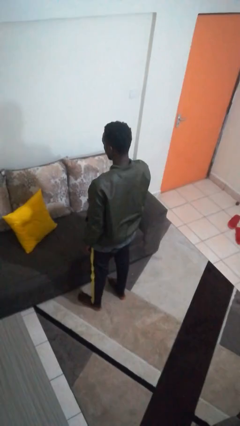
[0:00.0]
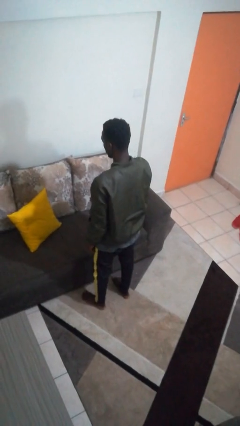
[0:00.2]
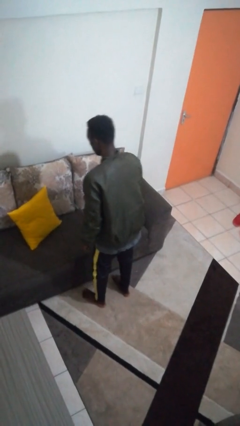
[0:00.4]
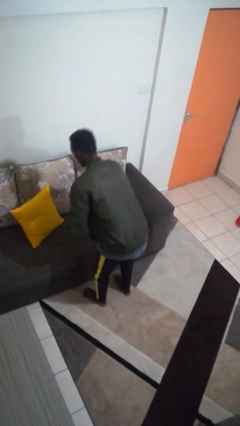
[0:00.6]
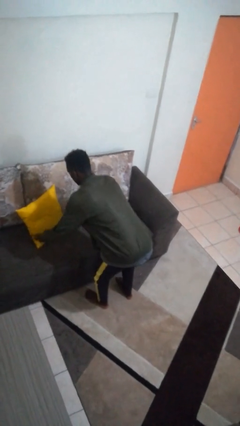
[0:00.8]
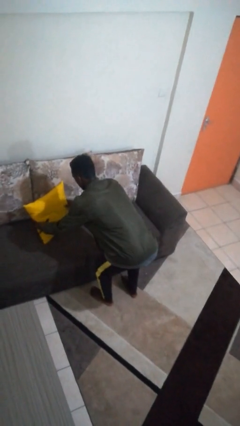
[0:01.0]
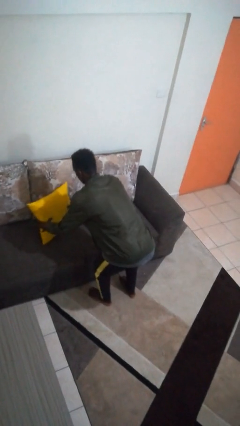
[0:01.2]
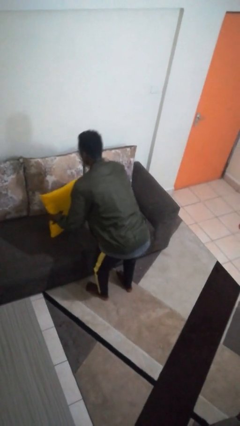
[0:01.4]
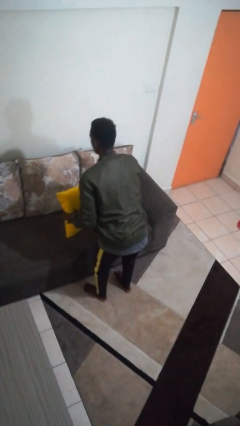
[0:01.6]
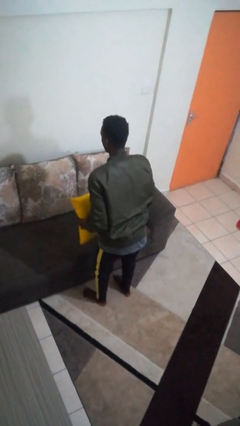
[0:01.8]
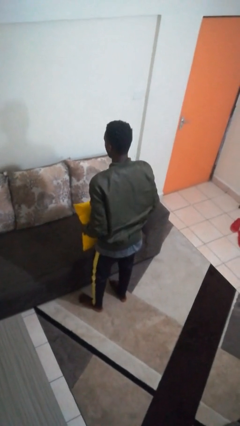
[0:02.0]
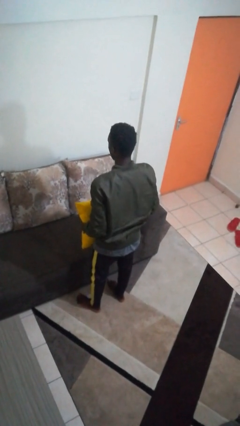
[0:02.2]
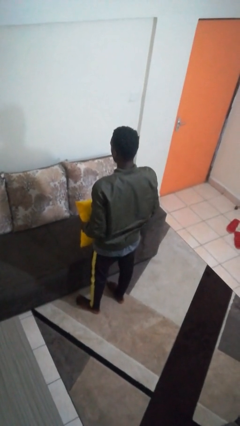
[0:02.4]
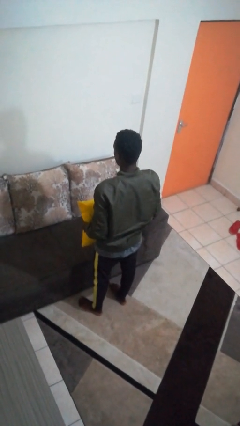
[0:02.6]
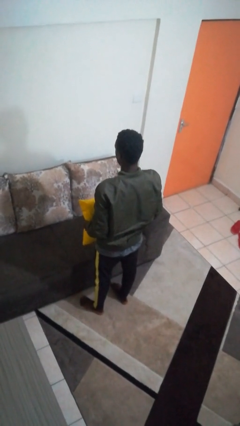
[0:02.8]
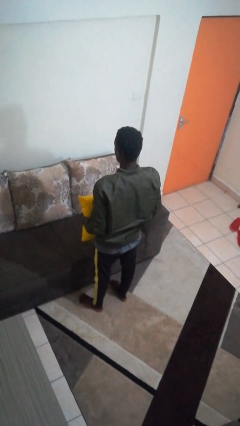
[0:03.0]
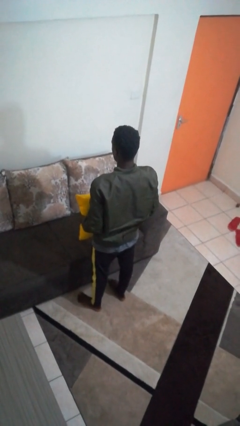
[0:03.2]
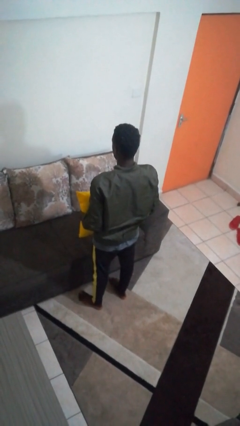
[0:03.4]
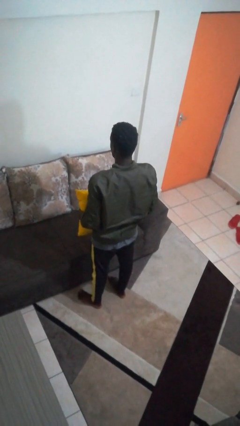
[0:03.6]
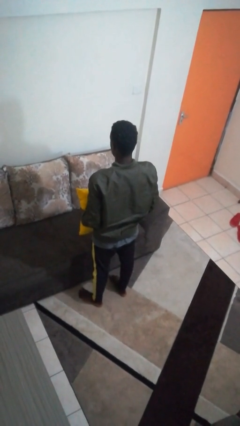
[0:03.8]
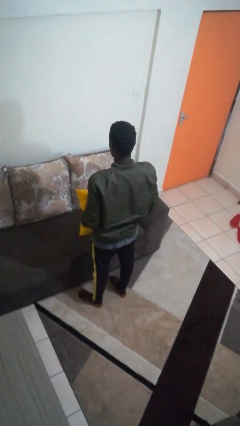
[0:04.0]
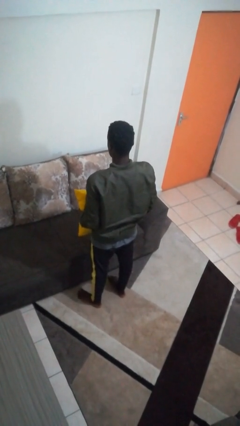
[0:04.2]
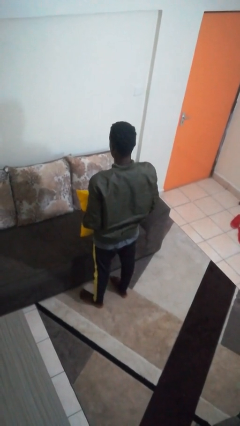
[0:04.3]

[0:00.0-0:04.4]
person picks up object from couch

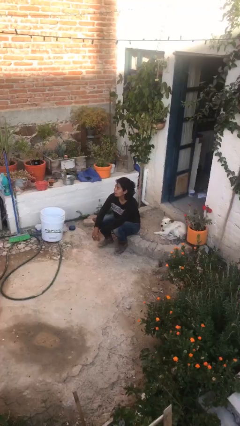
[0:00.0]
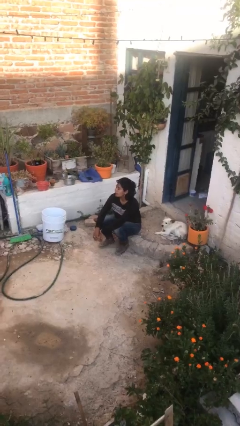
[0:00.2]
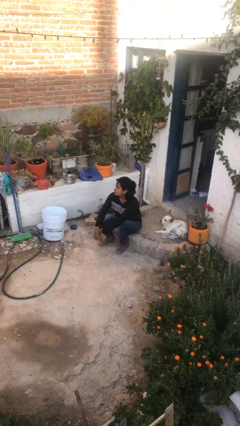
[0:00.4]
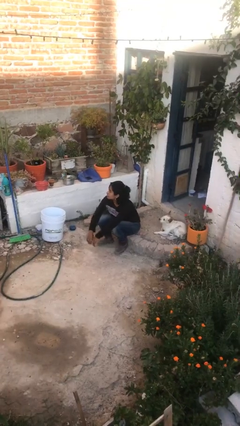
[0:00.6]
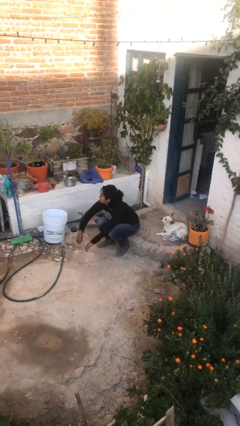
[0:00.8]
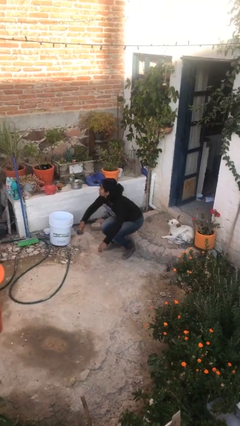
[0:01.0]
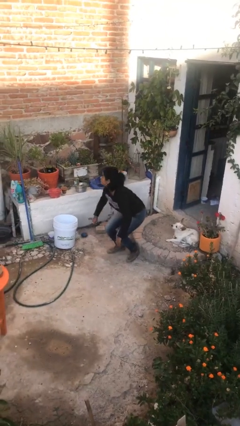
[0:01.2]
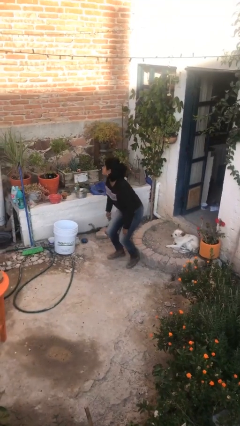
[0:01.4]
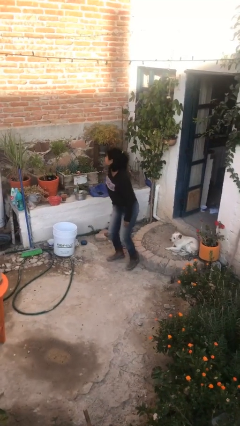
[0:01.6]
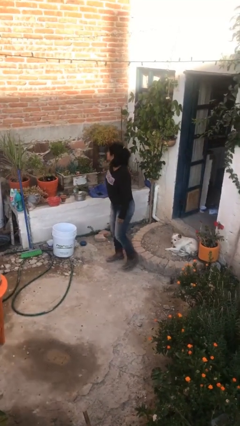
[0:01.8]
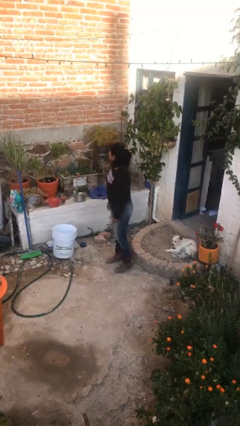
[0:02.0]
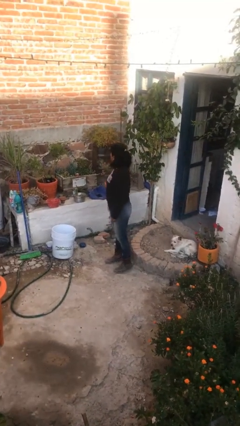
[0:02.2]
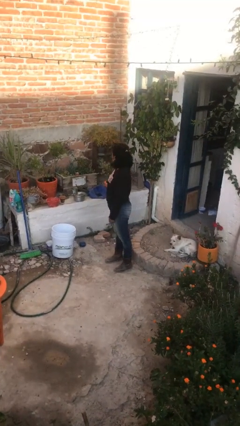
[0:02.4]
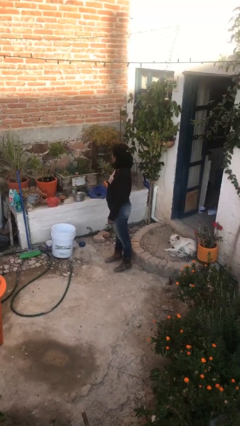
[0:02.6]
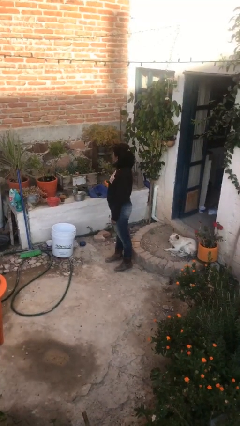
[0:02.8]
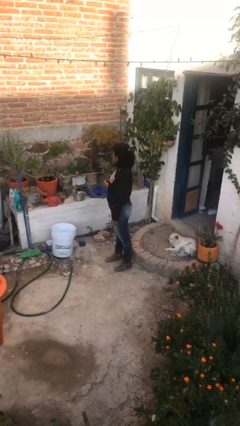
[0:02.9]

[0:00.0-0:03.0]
person stands up

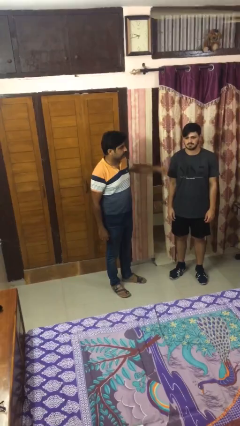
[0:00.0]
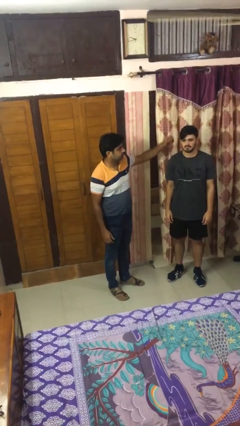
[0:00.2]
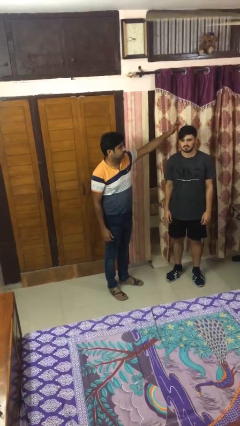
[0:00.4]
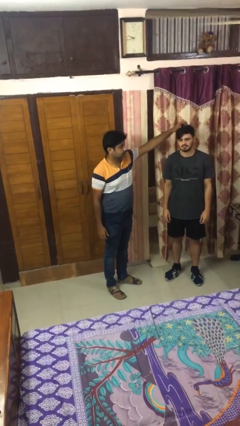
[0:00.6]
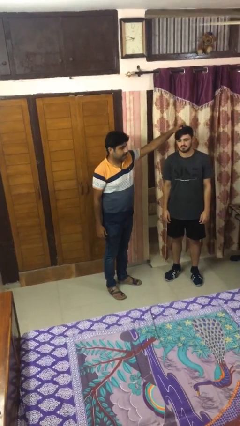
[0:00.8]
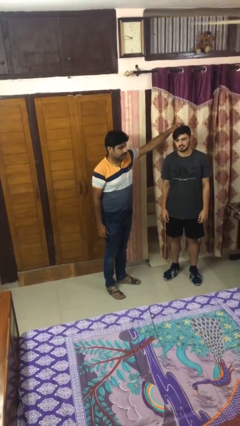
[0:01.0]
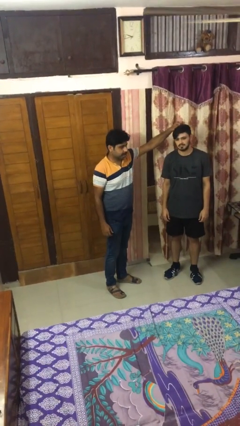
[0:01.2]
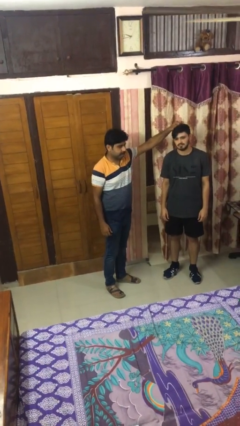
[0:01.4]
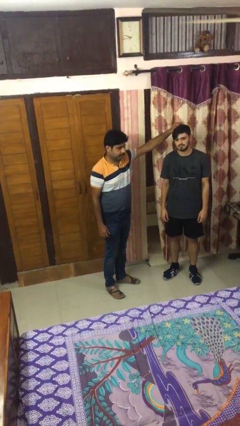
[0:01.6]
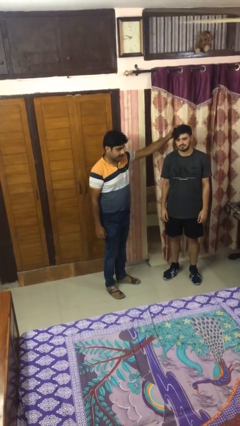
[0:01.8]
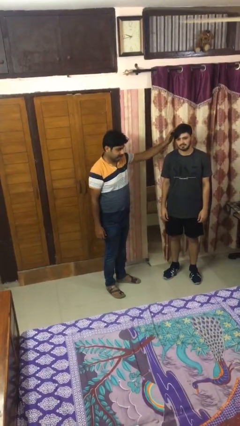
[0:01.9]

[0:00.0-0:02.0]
person grabs person by hair

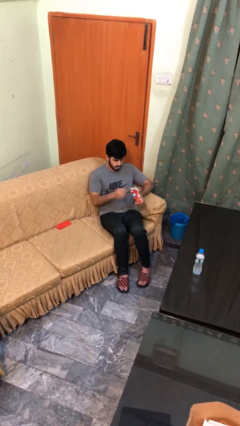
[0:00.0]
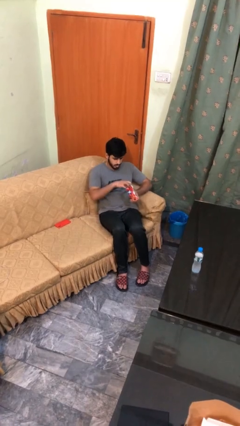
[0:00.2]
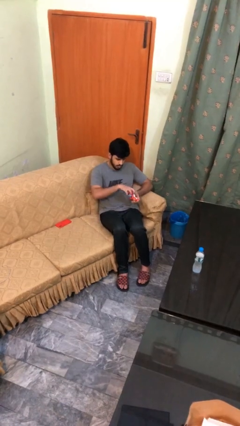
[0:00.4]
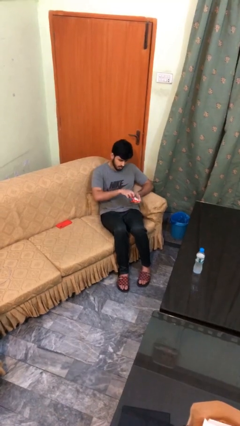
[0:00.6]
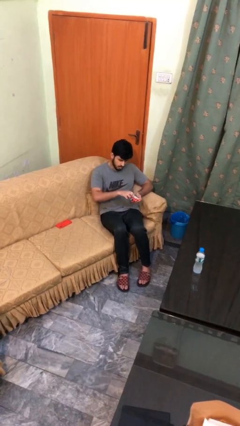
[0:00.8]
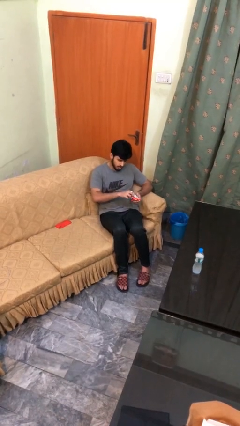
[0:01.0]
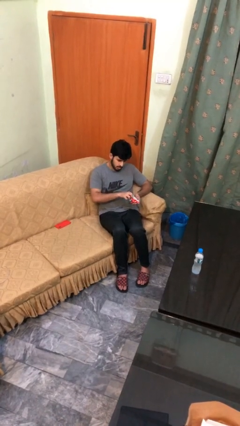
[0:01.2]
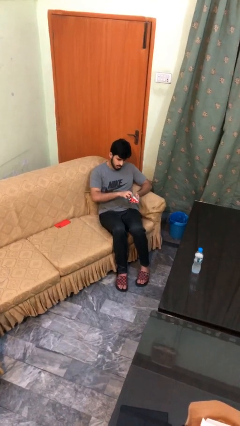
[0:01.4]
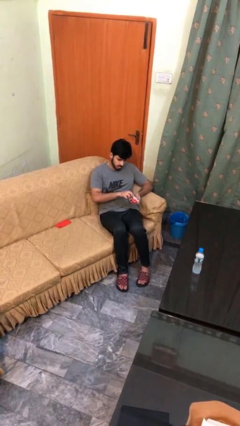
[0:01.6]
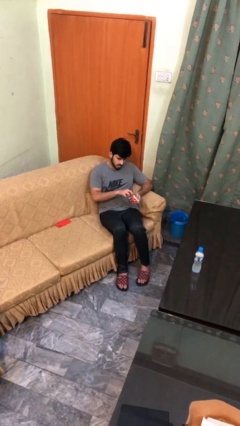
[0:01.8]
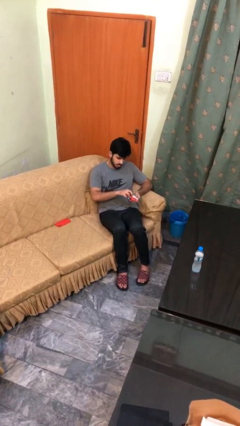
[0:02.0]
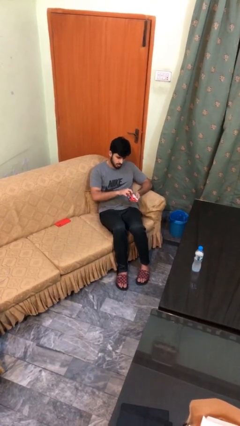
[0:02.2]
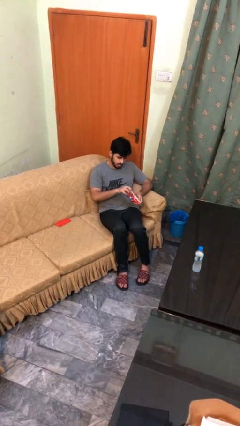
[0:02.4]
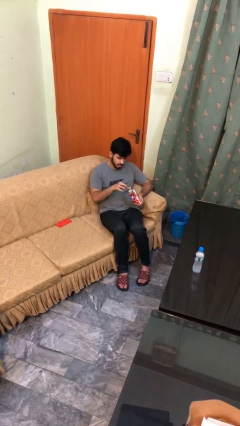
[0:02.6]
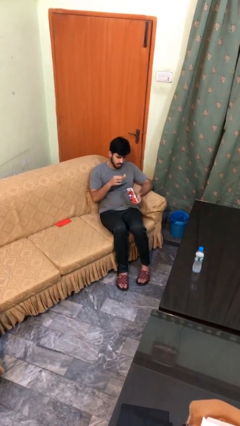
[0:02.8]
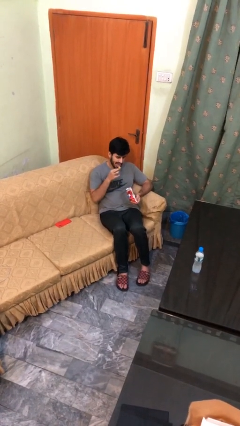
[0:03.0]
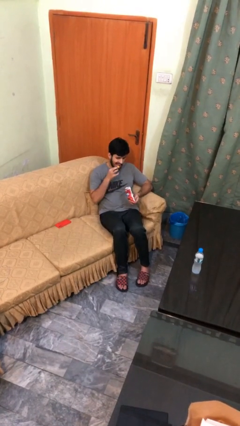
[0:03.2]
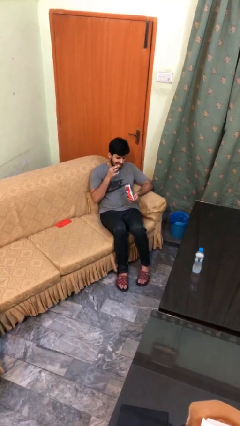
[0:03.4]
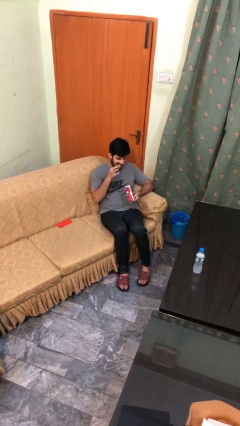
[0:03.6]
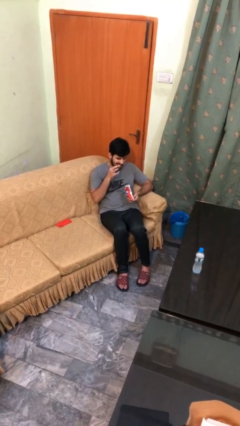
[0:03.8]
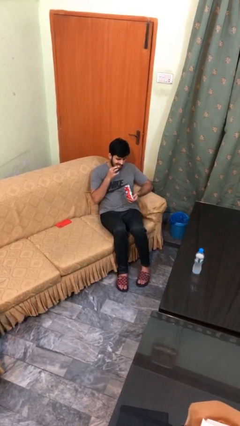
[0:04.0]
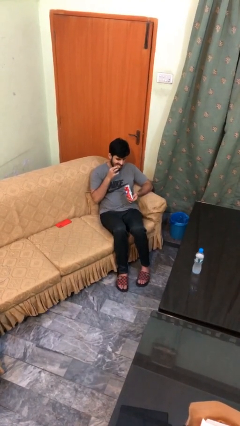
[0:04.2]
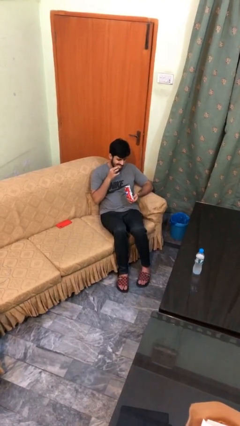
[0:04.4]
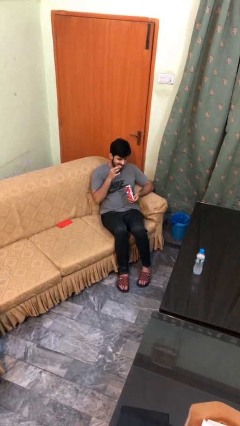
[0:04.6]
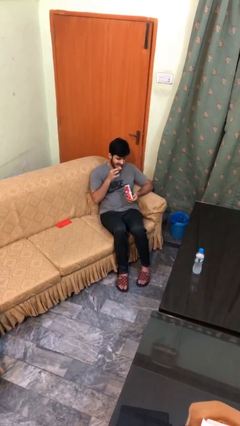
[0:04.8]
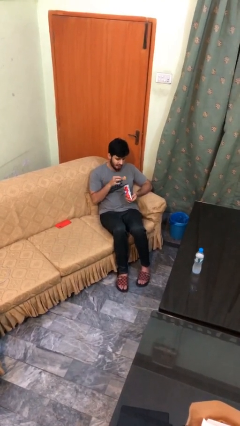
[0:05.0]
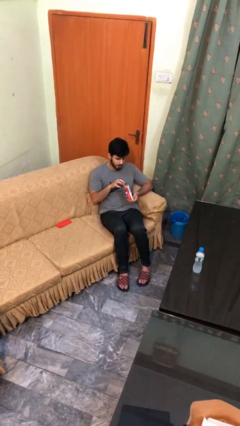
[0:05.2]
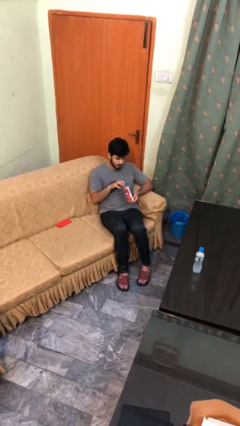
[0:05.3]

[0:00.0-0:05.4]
person eats snack from bag

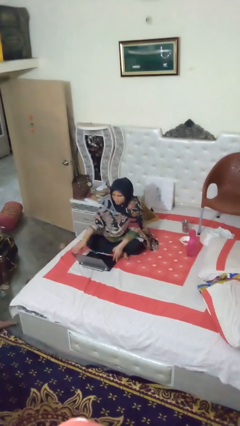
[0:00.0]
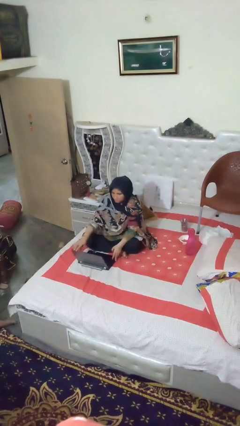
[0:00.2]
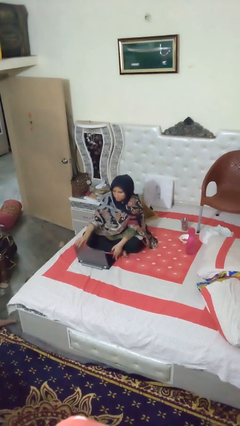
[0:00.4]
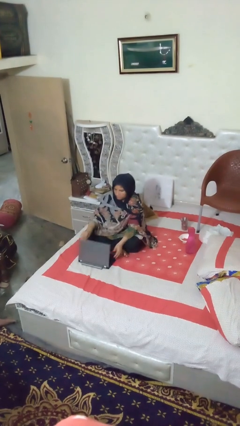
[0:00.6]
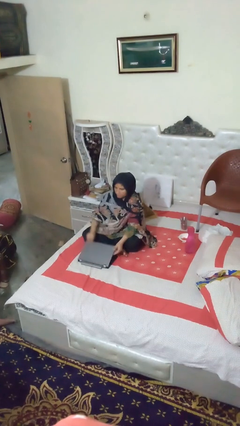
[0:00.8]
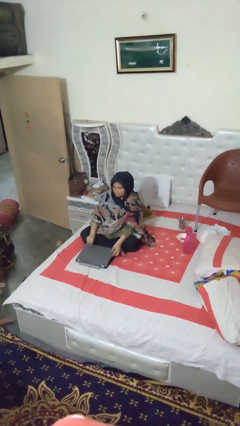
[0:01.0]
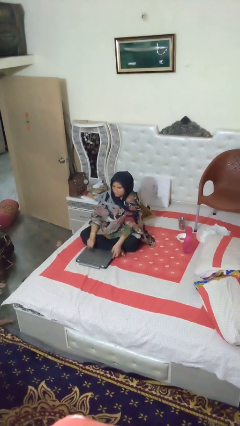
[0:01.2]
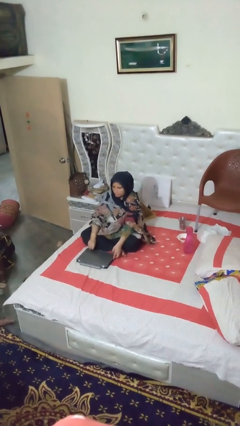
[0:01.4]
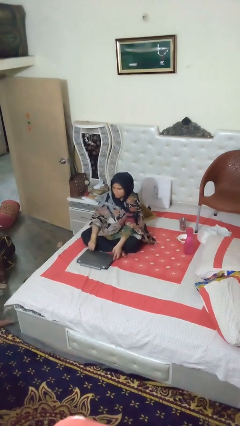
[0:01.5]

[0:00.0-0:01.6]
person closes laptop

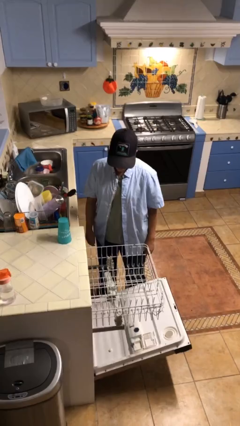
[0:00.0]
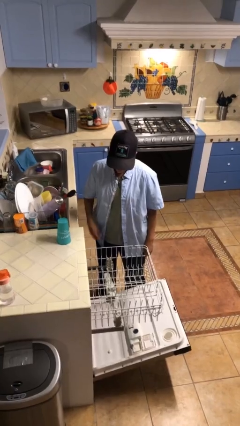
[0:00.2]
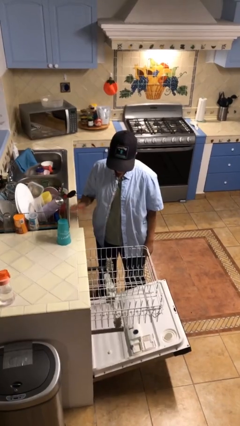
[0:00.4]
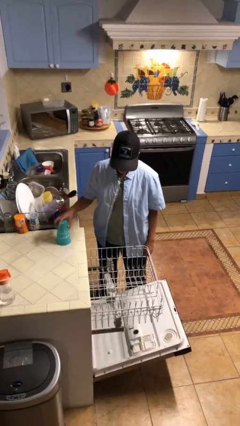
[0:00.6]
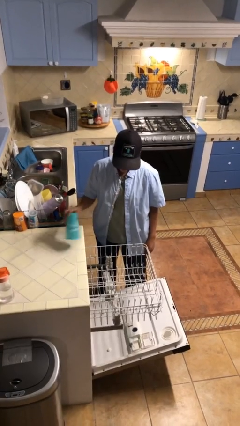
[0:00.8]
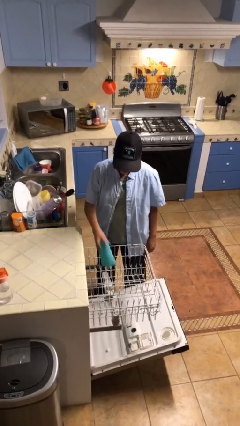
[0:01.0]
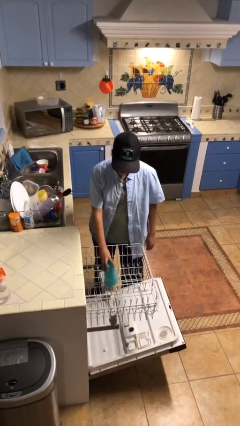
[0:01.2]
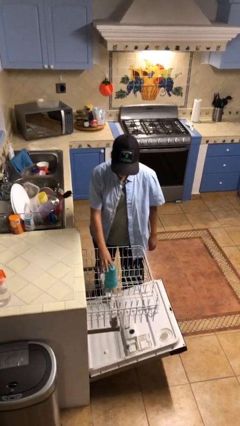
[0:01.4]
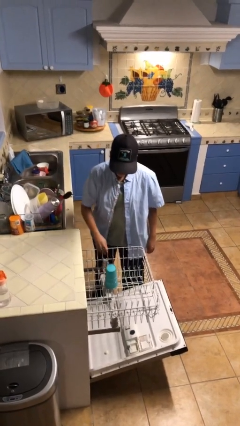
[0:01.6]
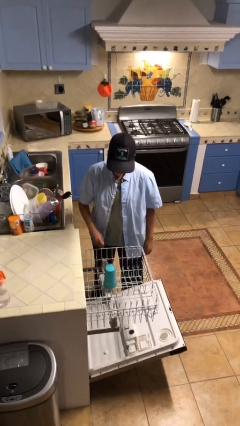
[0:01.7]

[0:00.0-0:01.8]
person loads dishwasher
